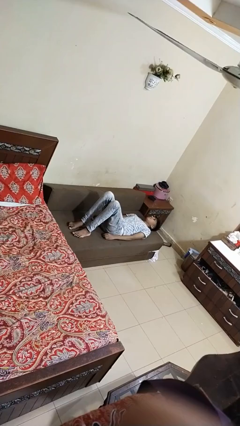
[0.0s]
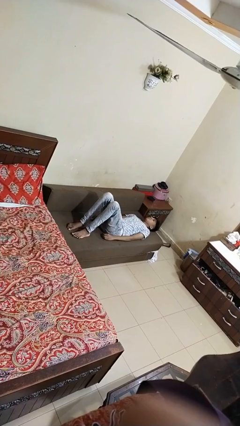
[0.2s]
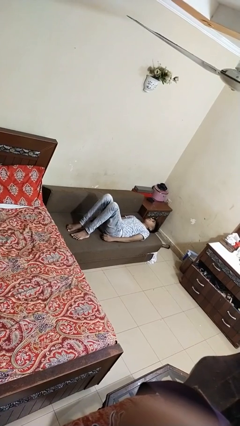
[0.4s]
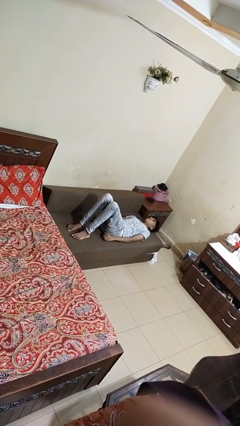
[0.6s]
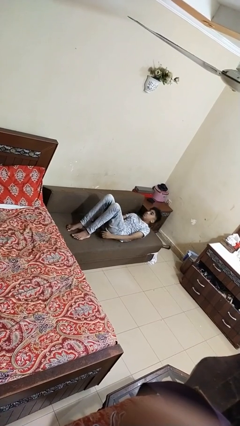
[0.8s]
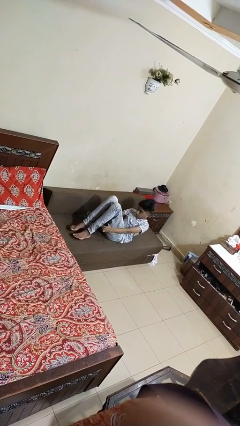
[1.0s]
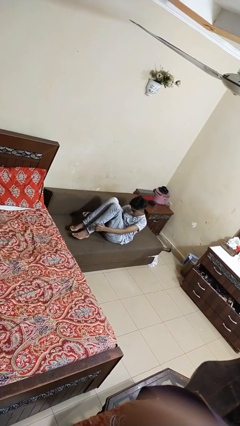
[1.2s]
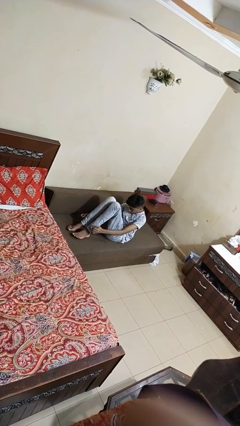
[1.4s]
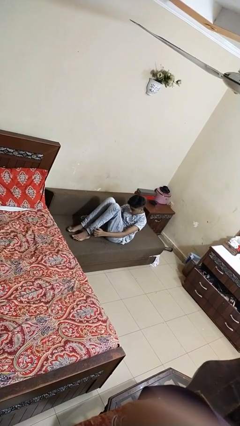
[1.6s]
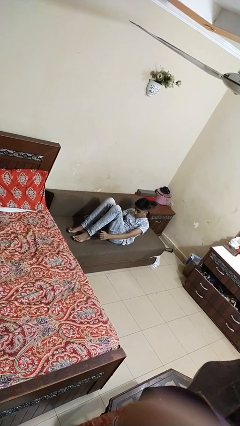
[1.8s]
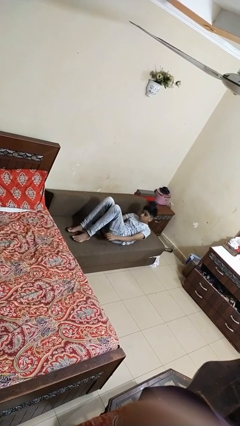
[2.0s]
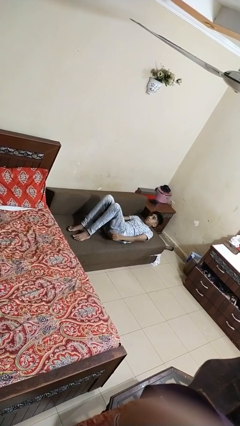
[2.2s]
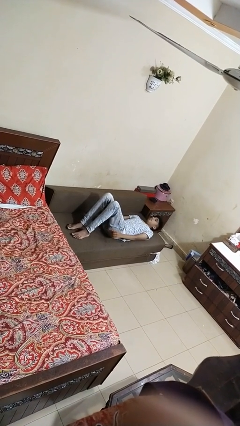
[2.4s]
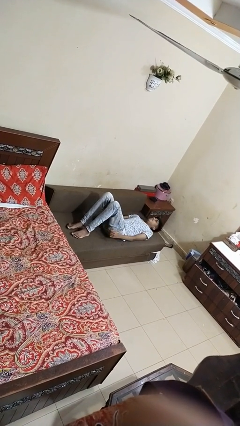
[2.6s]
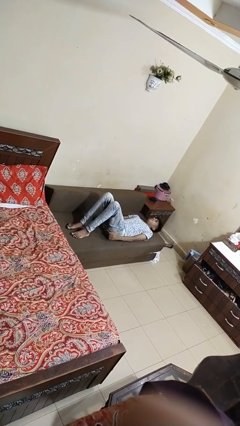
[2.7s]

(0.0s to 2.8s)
person exercises with situp

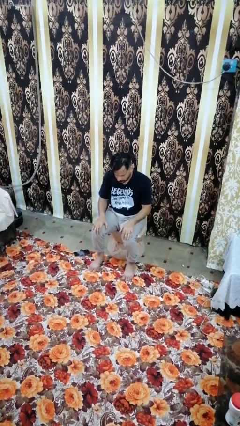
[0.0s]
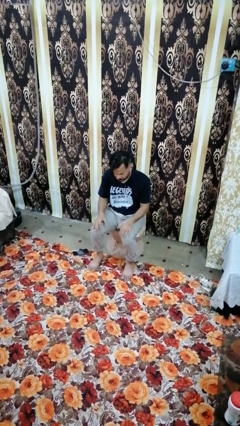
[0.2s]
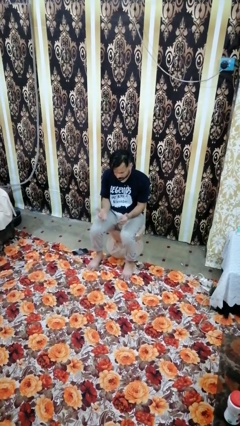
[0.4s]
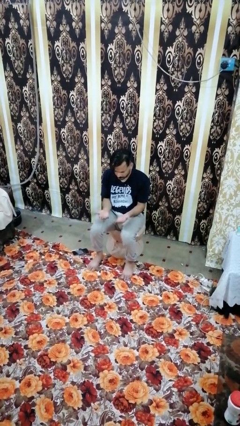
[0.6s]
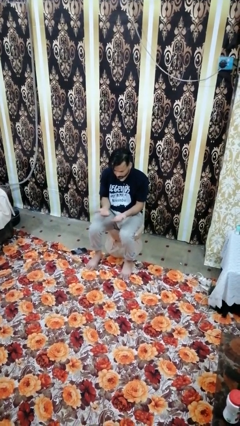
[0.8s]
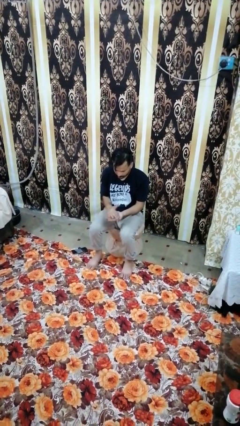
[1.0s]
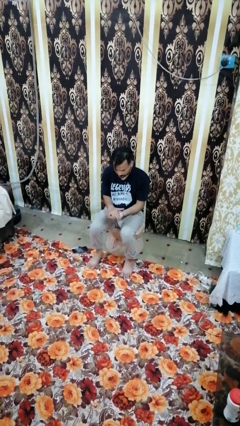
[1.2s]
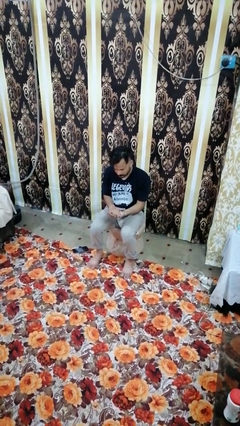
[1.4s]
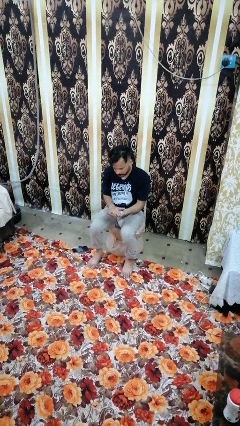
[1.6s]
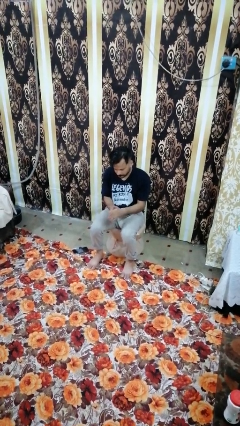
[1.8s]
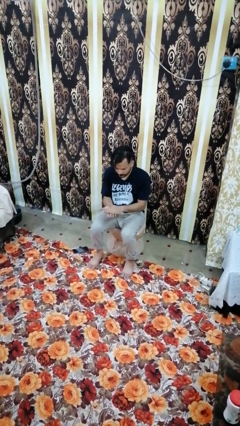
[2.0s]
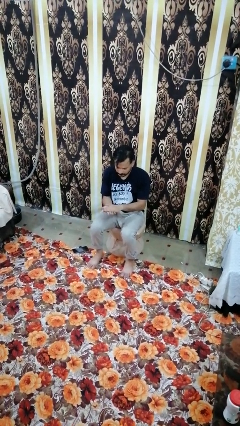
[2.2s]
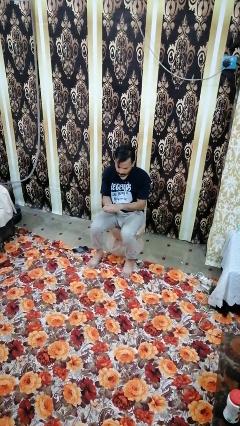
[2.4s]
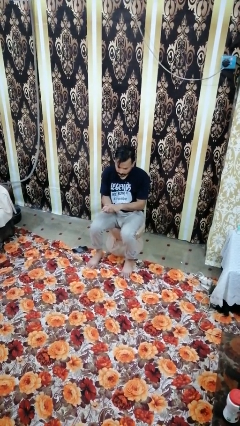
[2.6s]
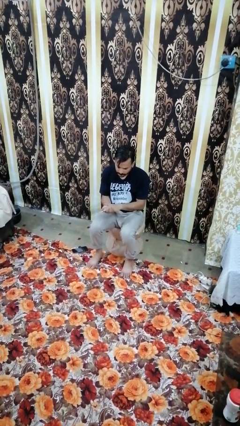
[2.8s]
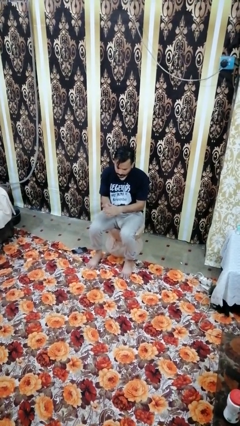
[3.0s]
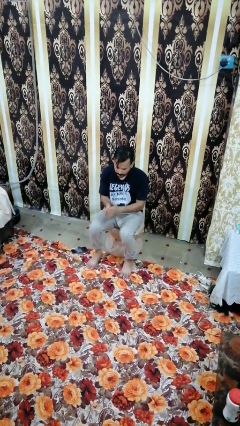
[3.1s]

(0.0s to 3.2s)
person looks at hands in lap

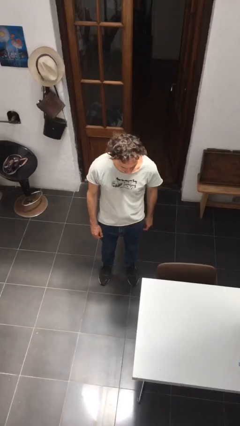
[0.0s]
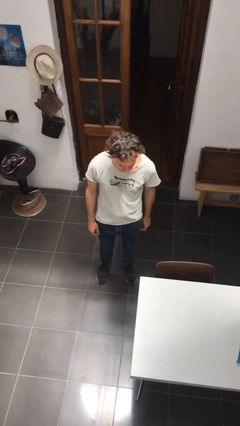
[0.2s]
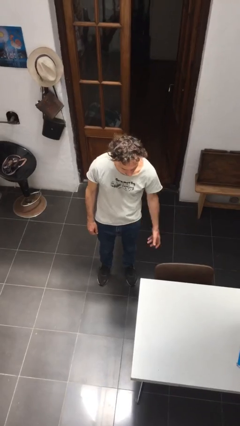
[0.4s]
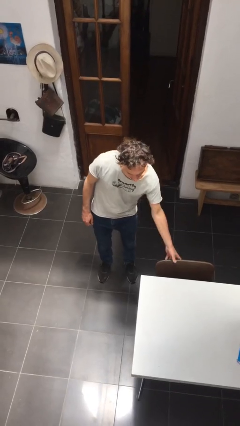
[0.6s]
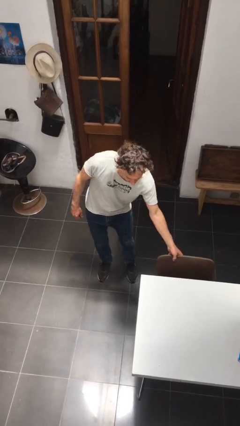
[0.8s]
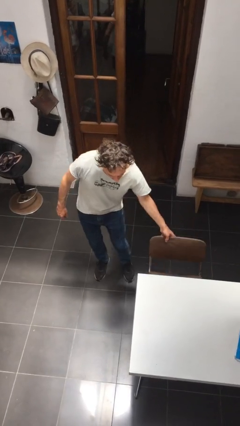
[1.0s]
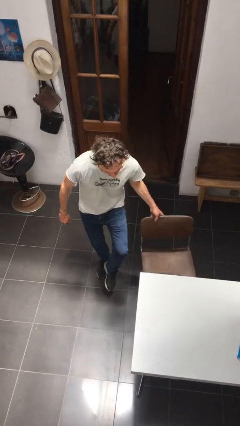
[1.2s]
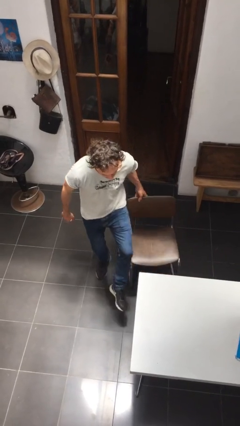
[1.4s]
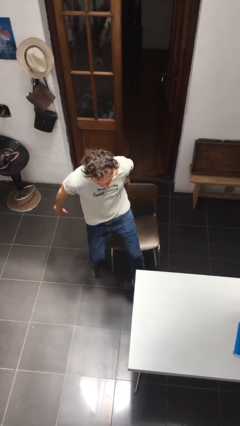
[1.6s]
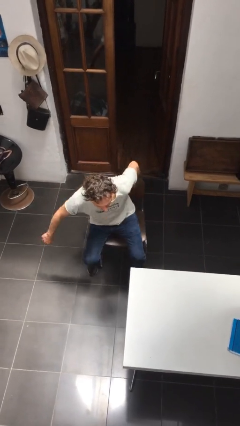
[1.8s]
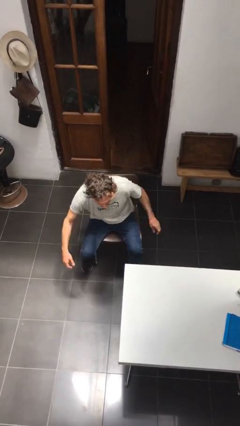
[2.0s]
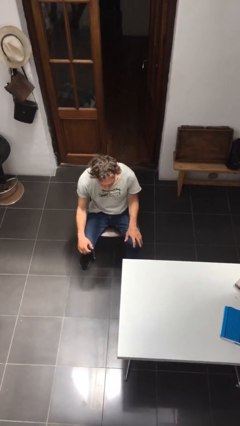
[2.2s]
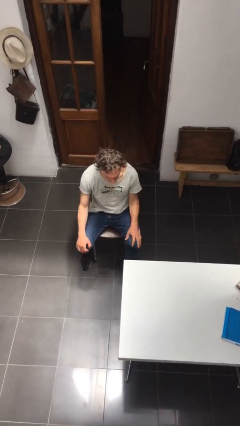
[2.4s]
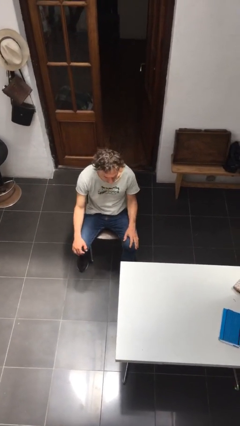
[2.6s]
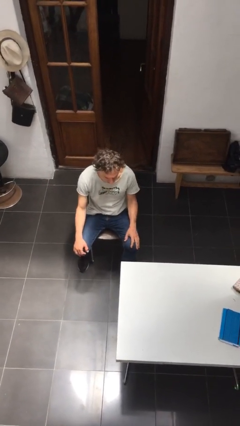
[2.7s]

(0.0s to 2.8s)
person sits down

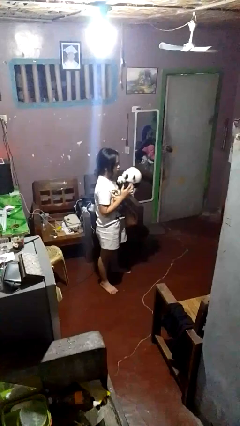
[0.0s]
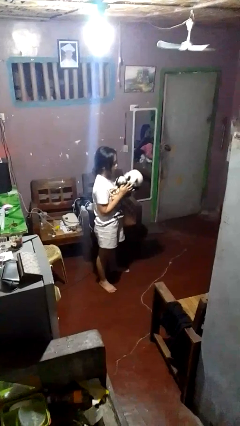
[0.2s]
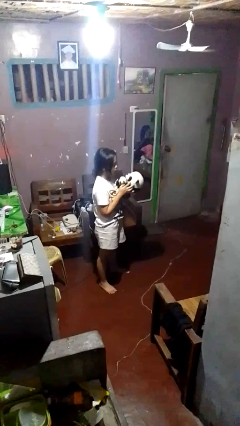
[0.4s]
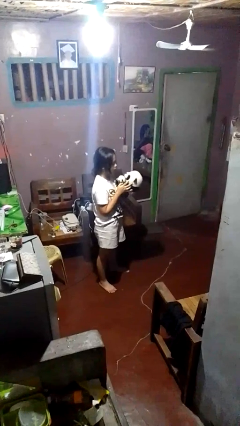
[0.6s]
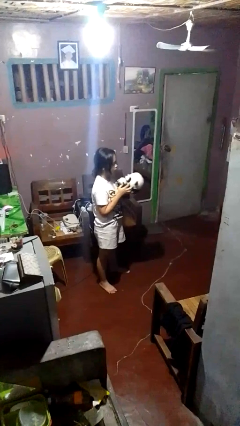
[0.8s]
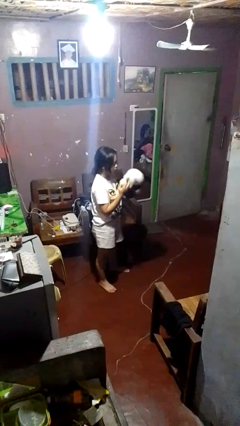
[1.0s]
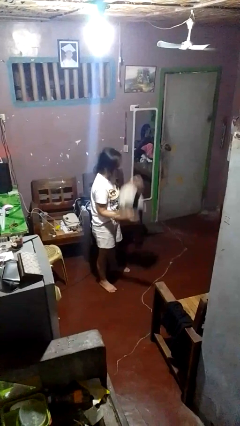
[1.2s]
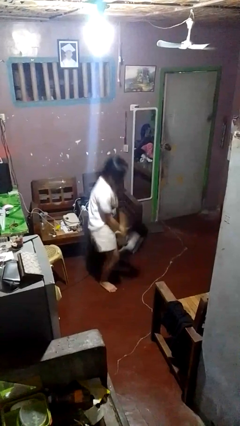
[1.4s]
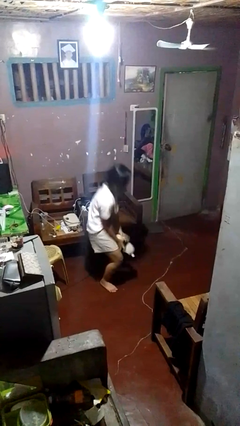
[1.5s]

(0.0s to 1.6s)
person drops object

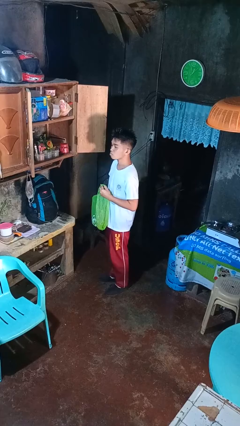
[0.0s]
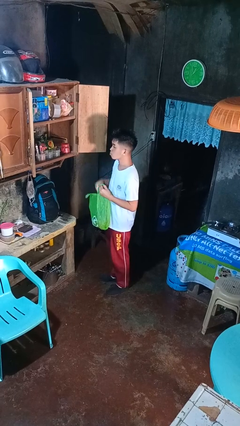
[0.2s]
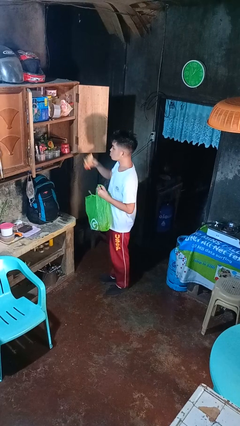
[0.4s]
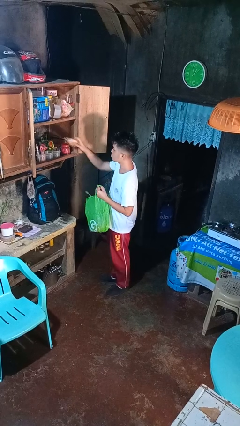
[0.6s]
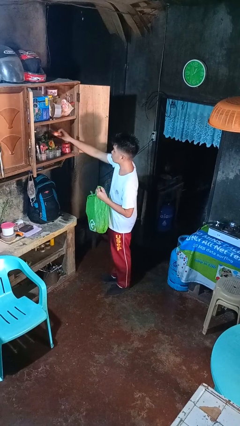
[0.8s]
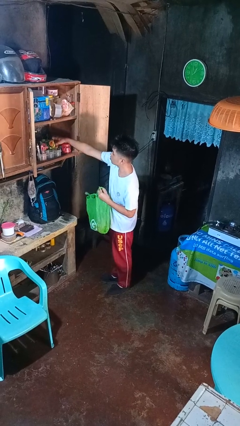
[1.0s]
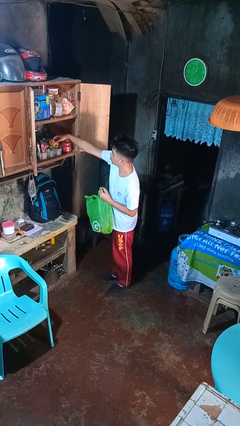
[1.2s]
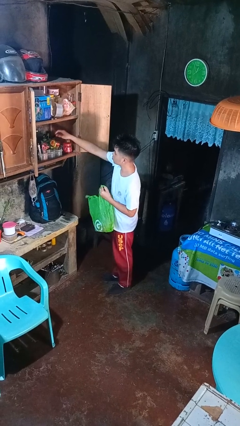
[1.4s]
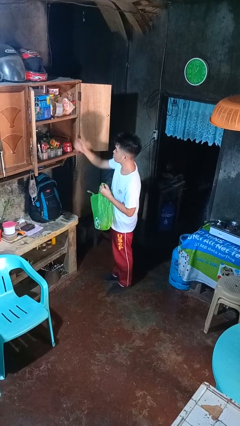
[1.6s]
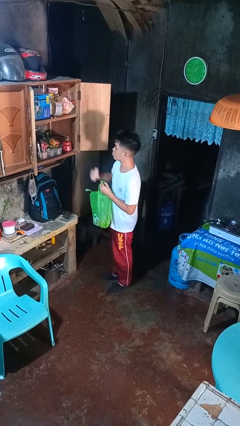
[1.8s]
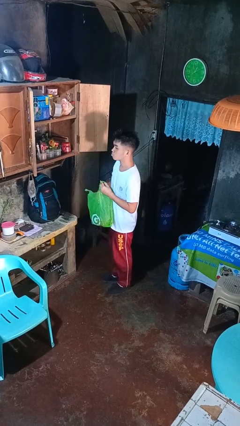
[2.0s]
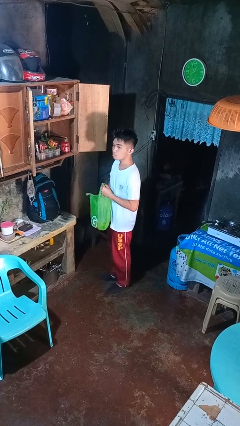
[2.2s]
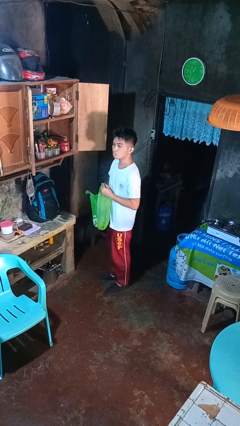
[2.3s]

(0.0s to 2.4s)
person loads groceries into cabinet

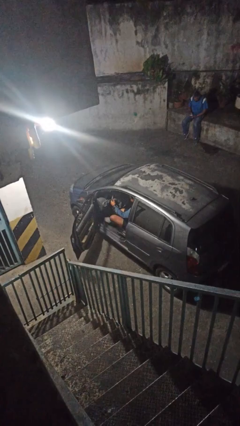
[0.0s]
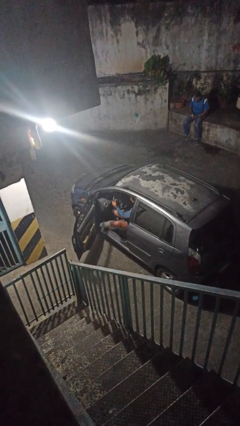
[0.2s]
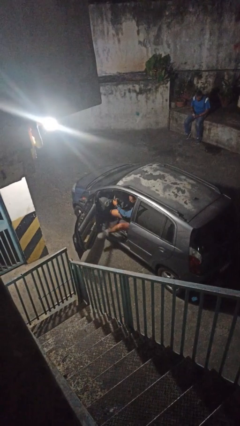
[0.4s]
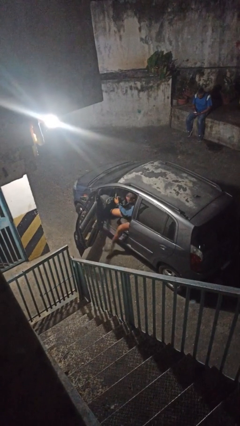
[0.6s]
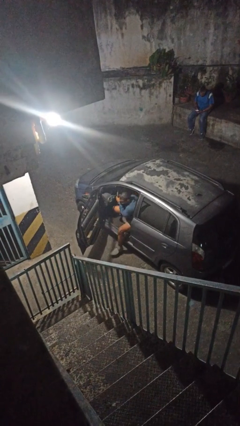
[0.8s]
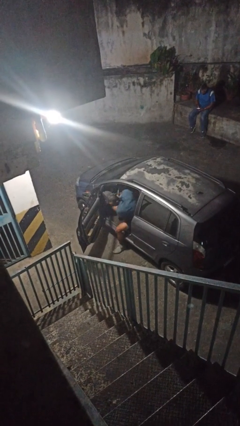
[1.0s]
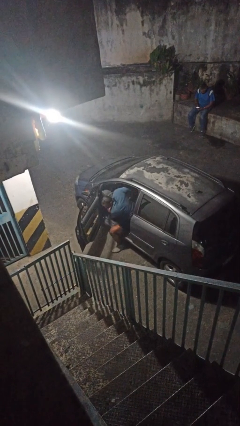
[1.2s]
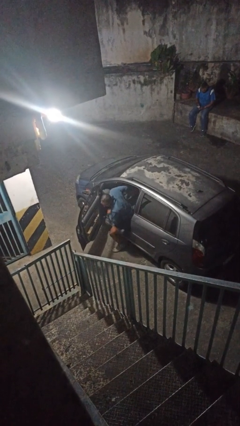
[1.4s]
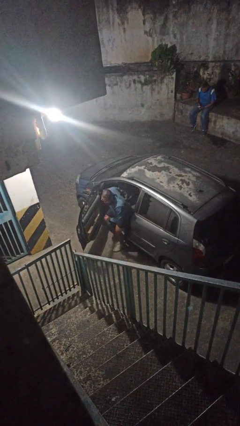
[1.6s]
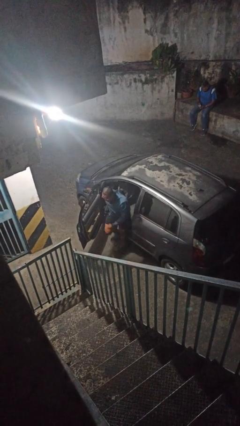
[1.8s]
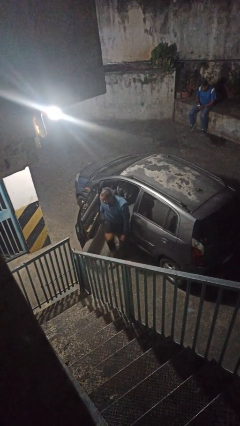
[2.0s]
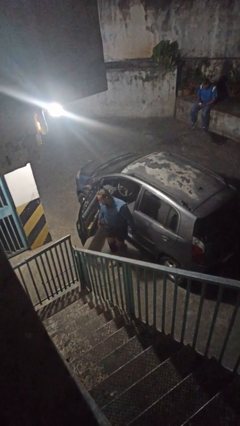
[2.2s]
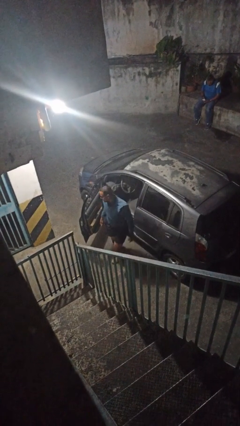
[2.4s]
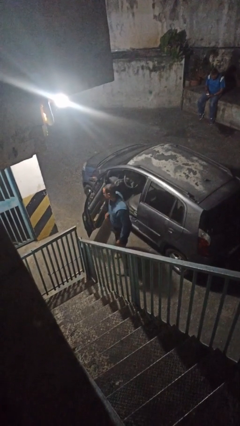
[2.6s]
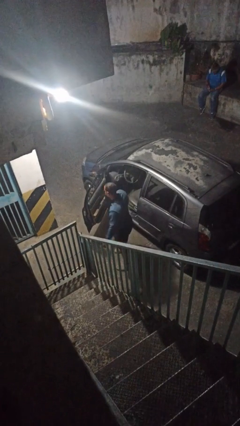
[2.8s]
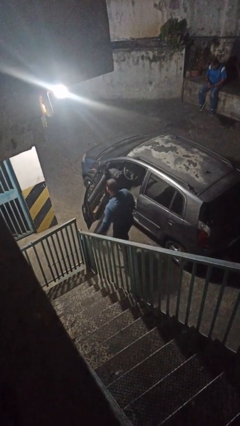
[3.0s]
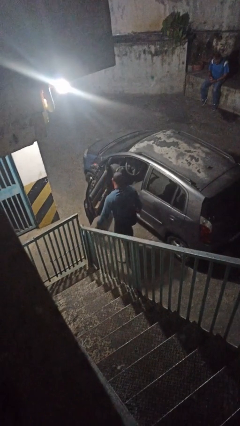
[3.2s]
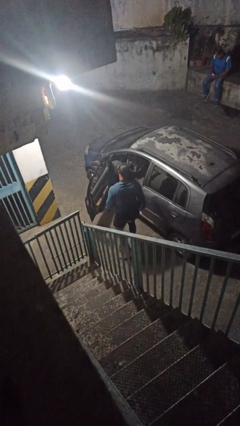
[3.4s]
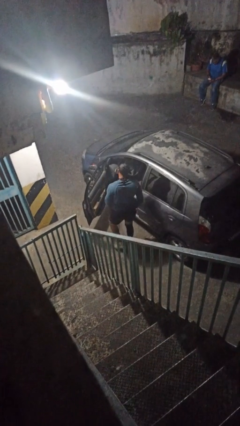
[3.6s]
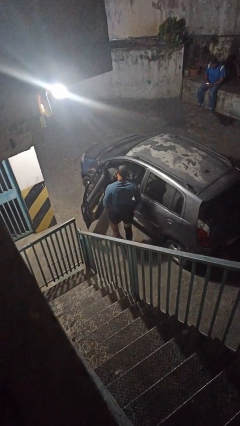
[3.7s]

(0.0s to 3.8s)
person exits car

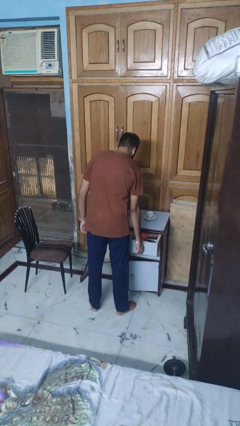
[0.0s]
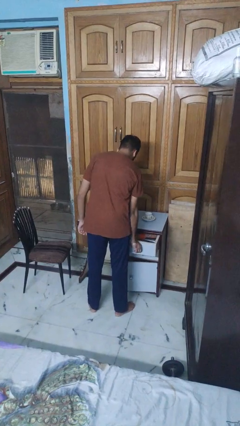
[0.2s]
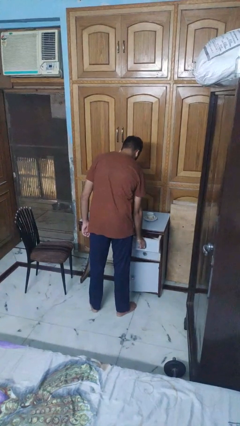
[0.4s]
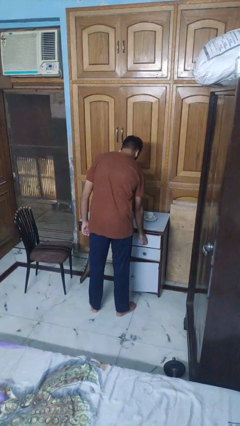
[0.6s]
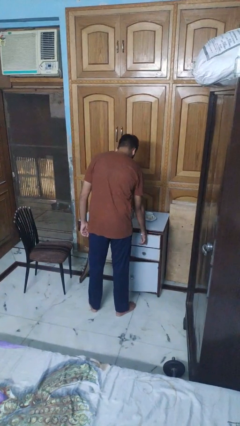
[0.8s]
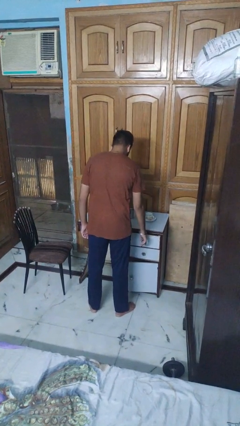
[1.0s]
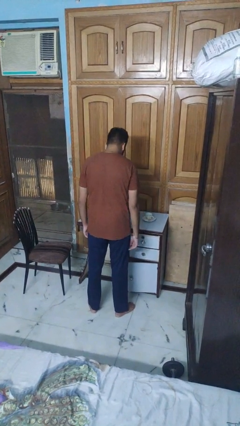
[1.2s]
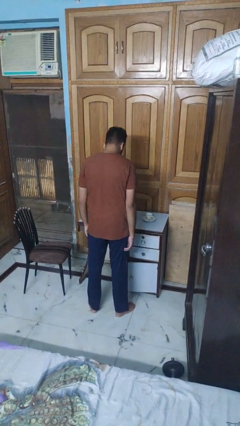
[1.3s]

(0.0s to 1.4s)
person closes kitchen drawer
